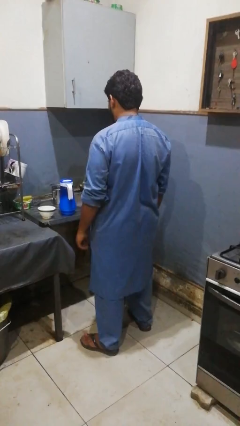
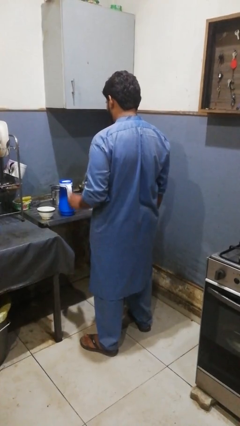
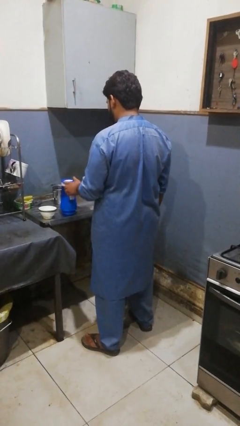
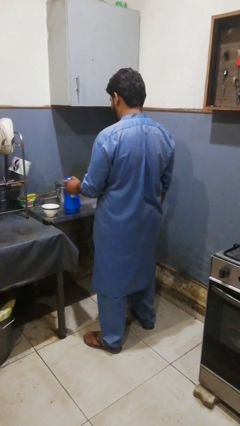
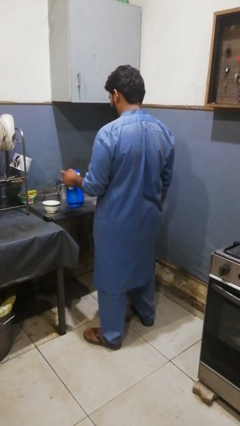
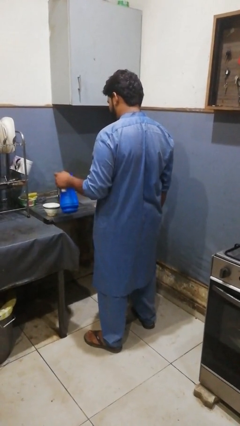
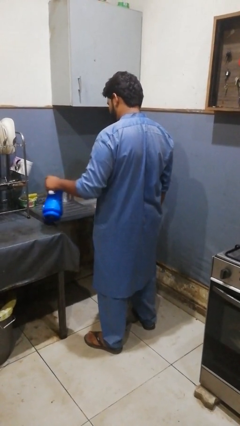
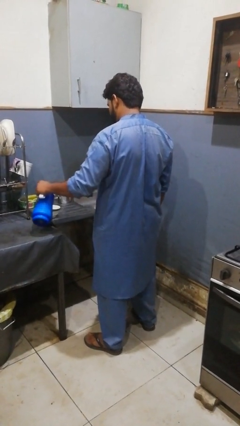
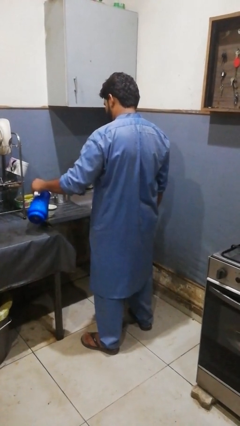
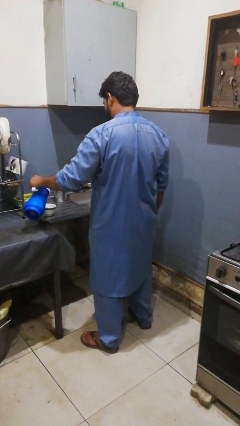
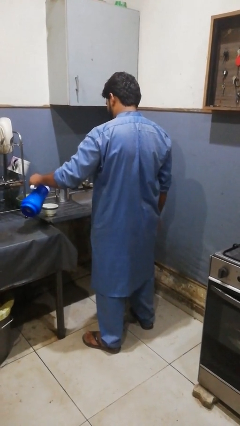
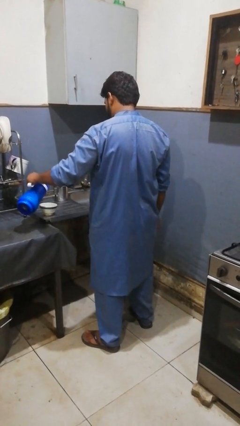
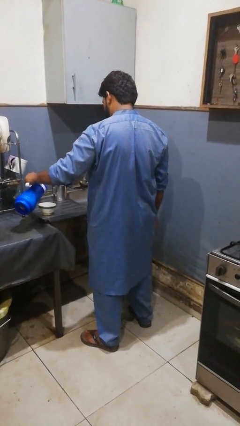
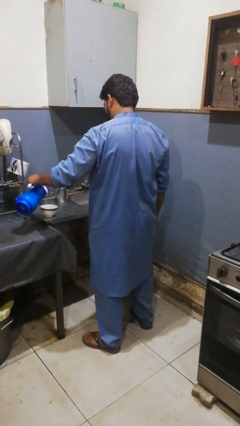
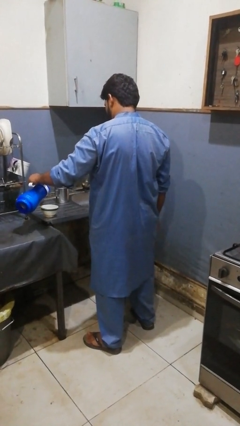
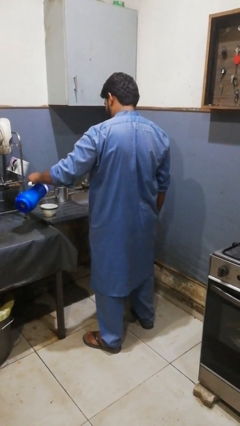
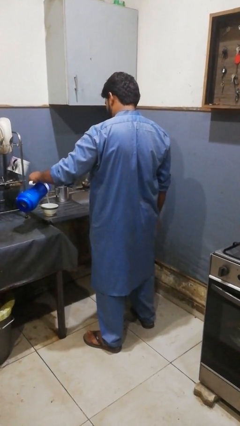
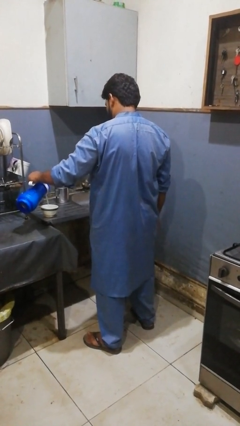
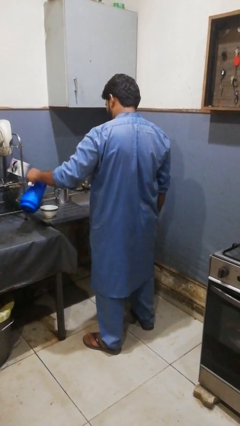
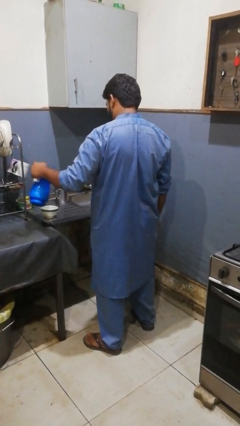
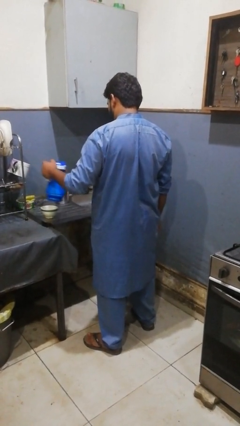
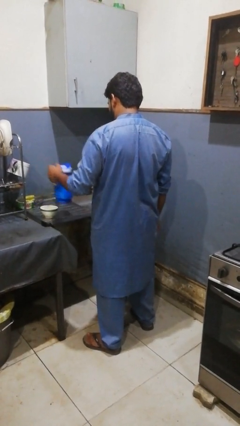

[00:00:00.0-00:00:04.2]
person pours into bowl

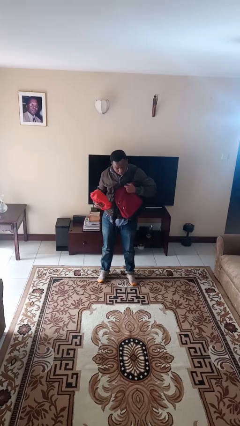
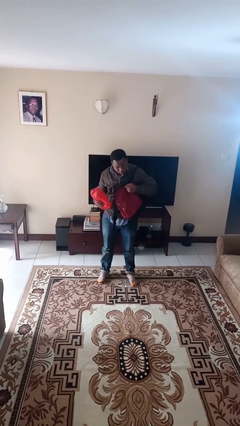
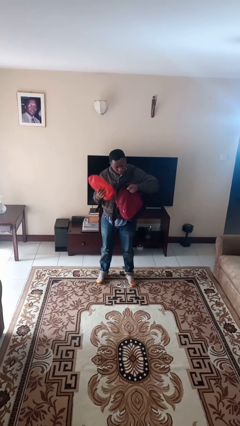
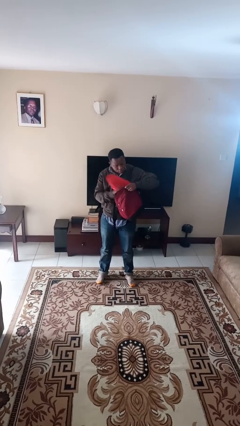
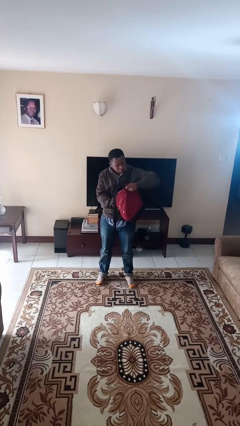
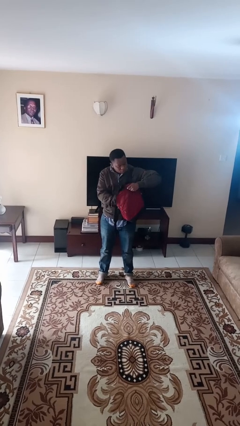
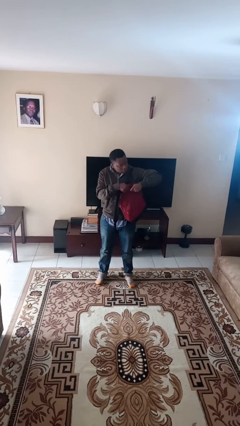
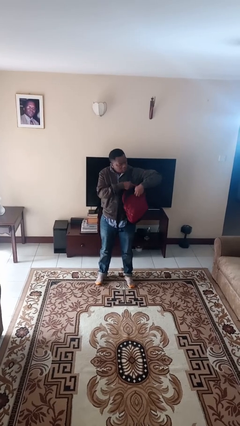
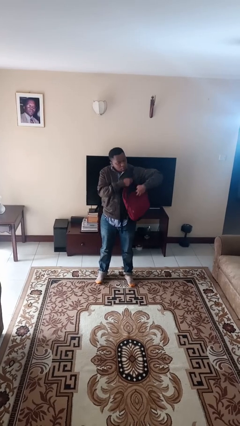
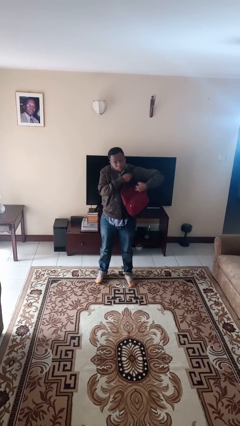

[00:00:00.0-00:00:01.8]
person puts object into backpack

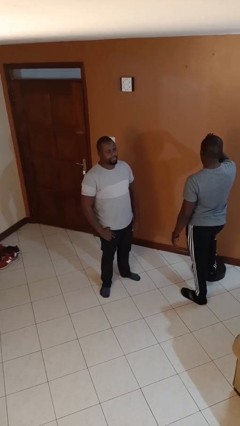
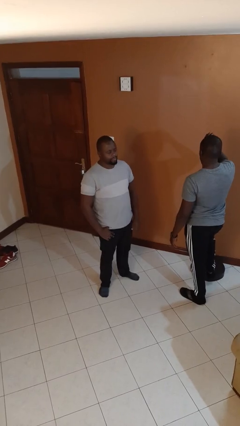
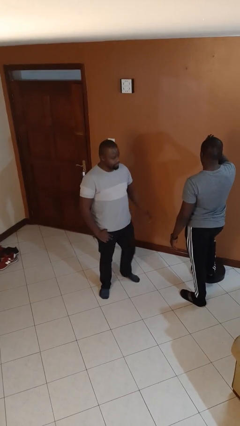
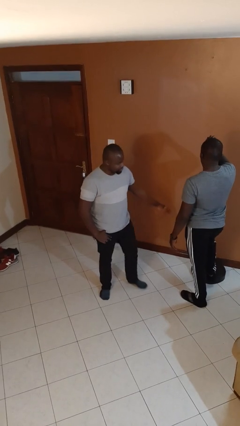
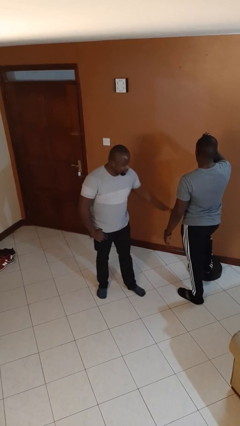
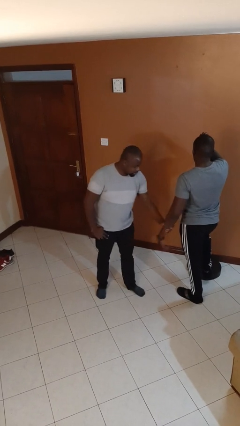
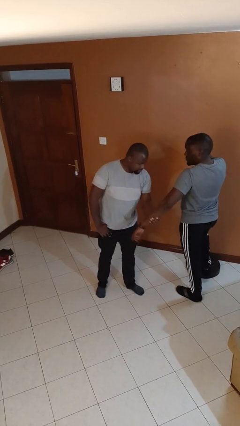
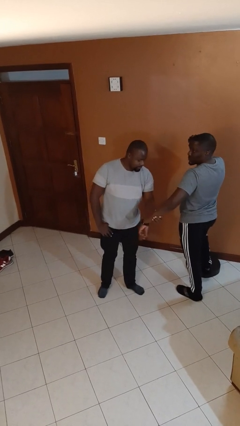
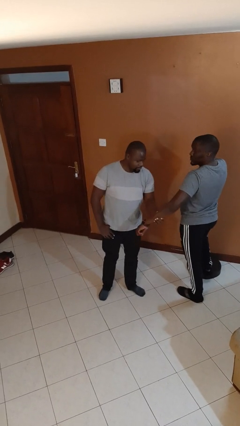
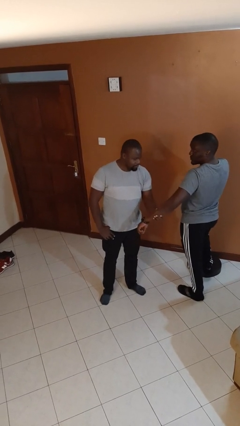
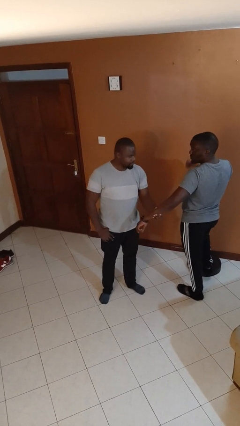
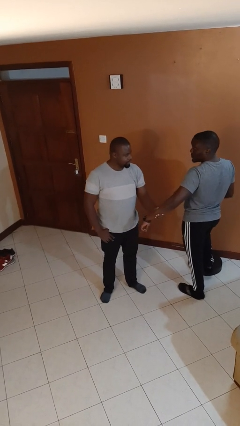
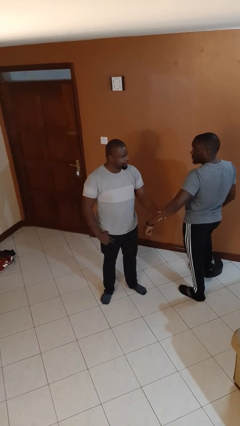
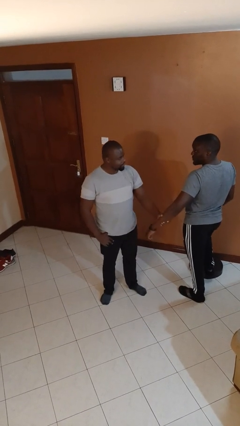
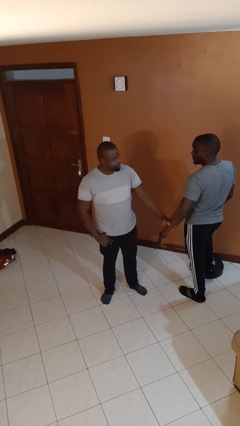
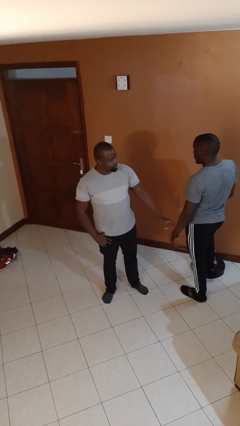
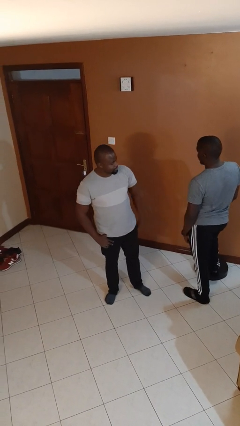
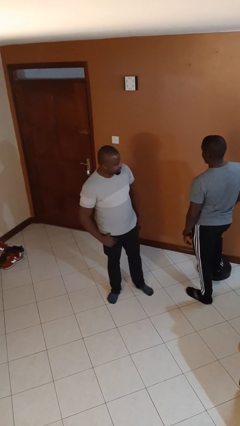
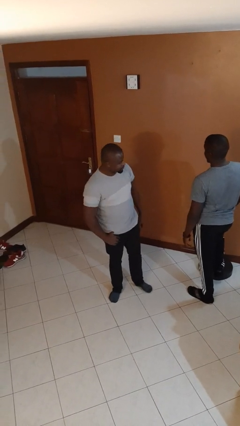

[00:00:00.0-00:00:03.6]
person grabs person by forearm

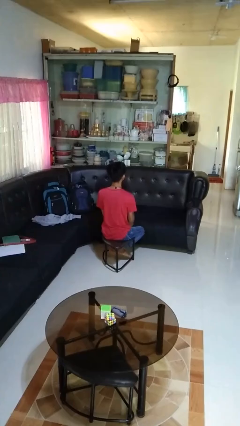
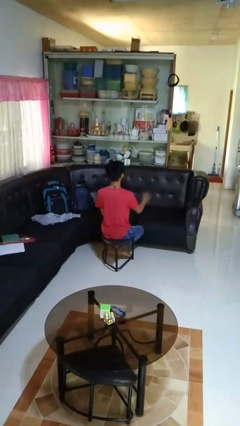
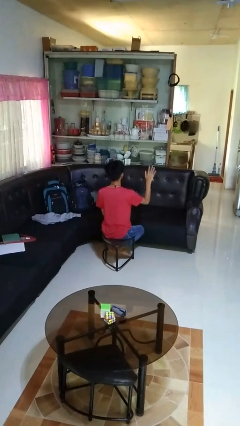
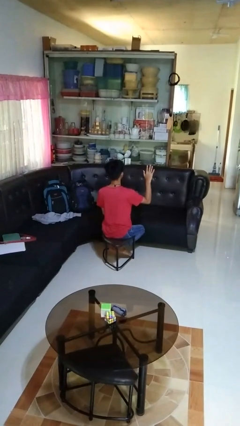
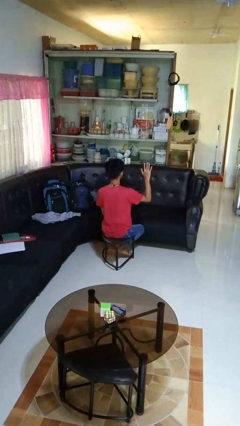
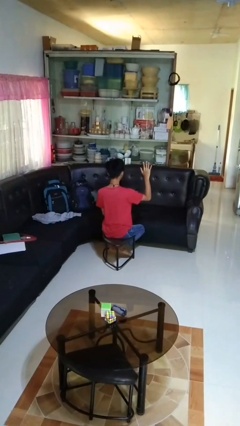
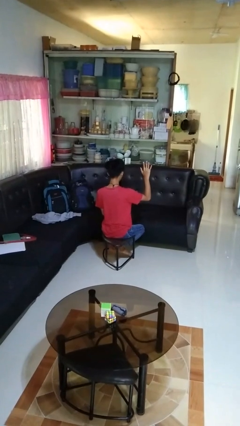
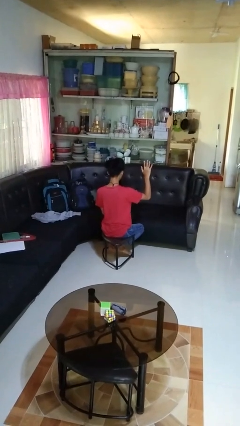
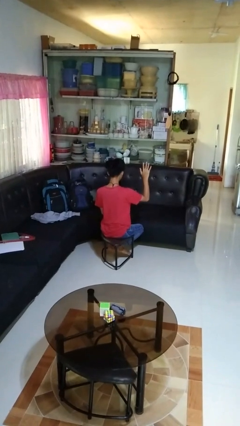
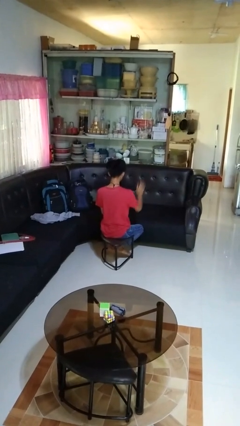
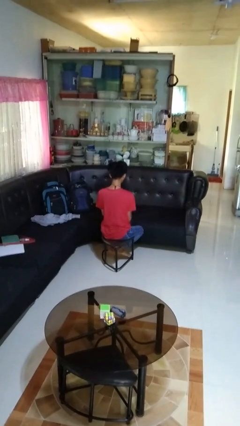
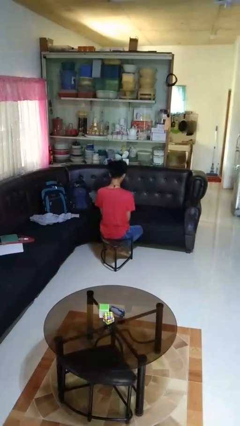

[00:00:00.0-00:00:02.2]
person gestures number five

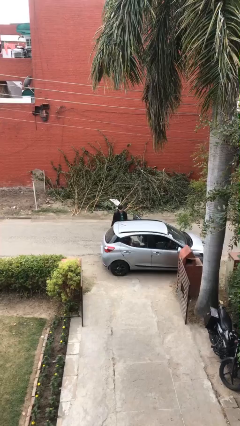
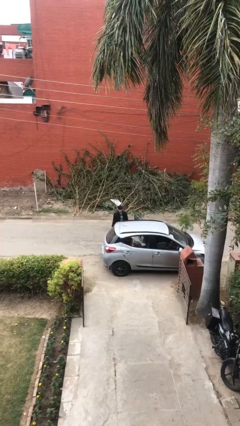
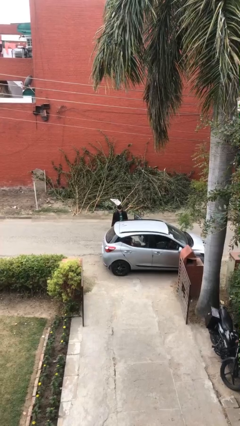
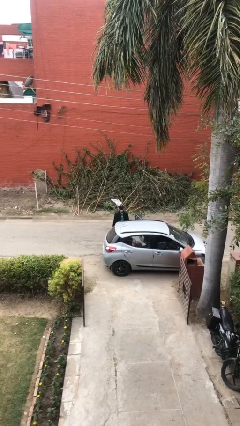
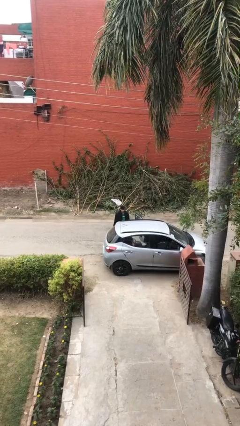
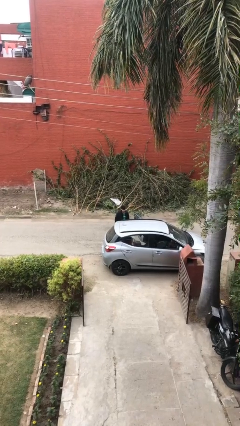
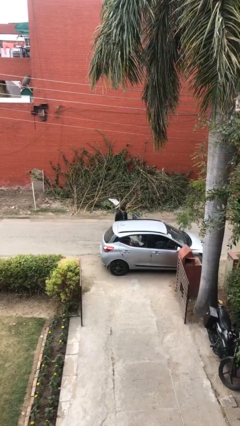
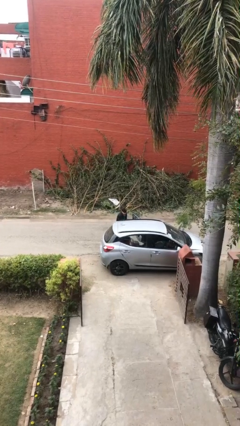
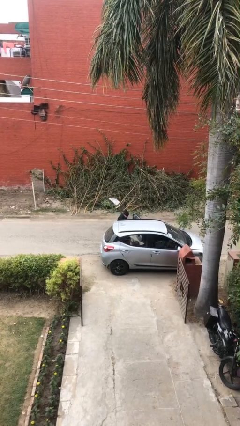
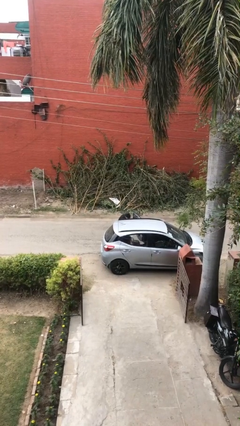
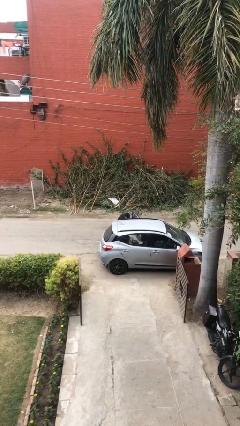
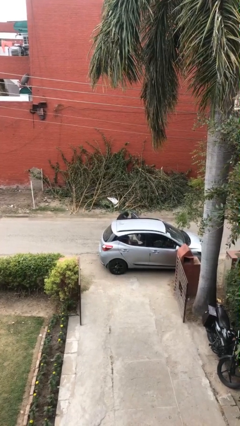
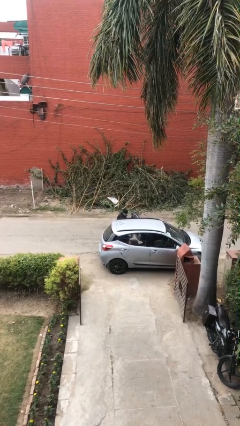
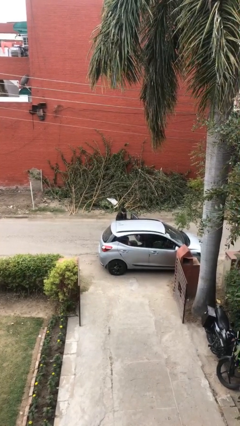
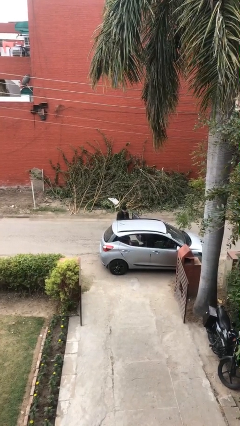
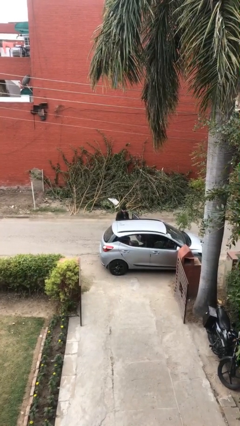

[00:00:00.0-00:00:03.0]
person unloads car

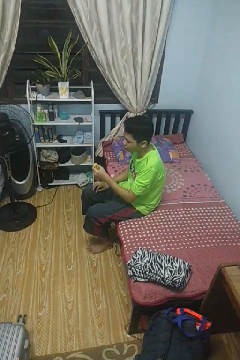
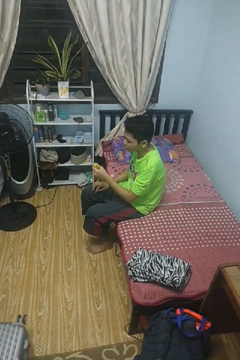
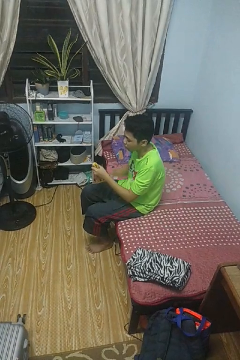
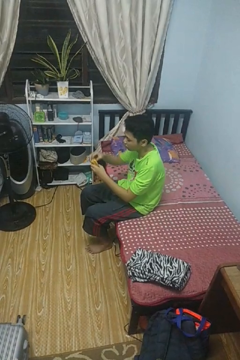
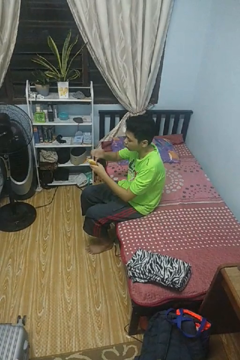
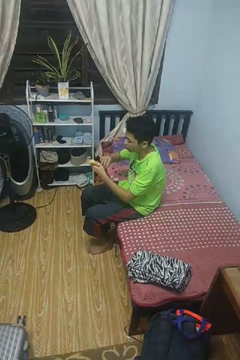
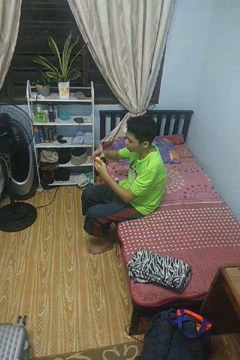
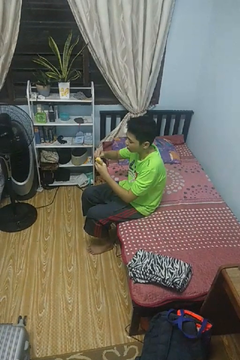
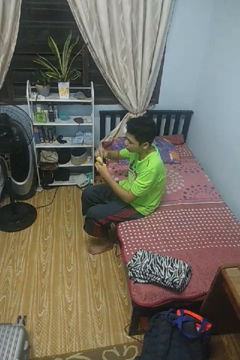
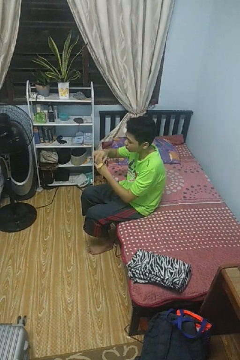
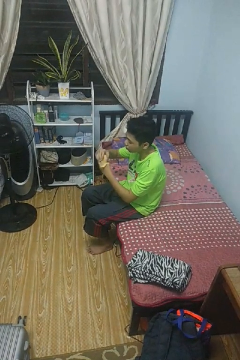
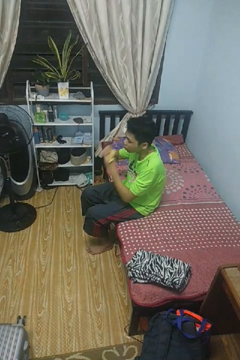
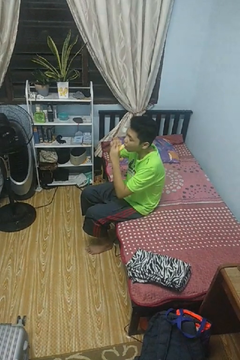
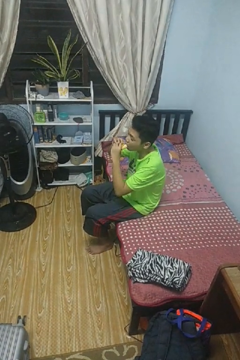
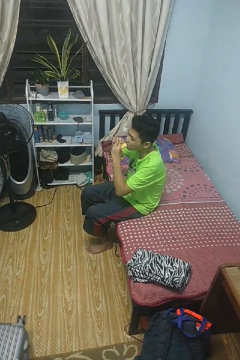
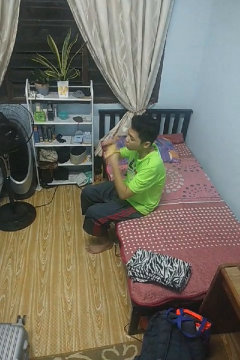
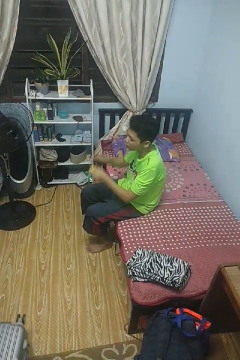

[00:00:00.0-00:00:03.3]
person eats banana
